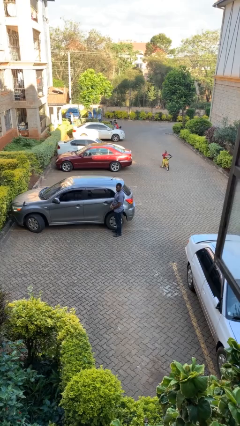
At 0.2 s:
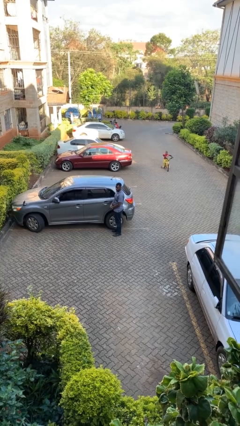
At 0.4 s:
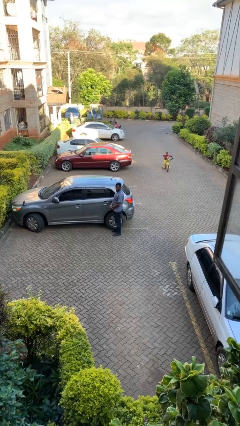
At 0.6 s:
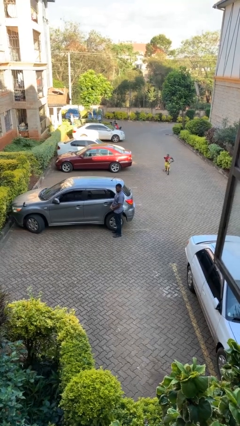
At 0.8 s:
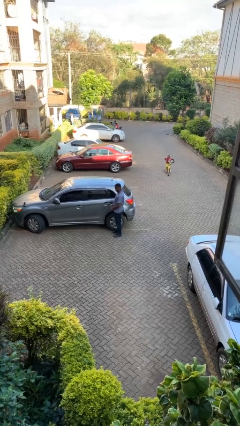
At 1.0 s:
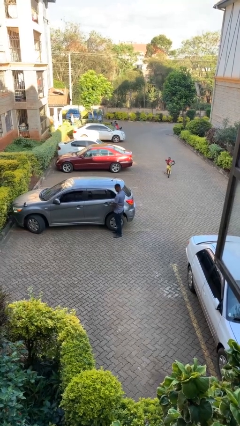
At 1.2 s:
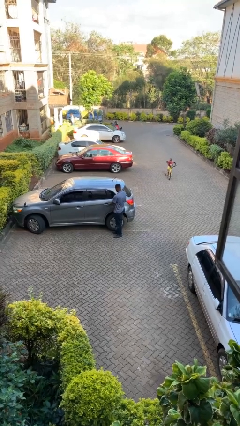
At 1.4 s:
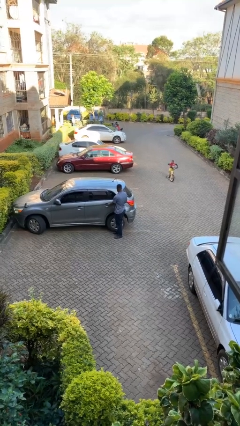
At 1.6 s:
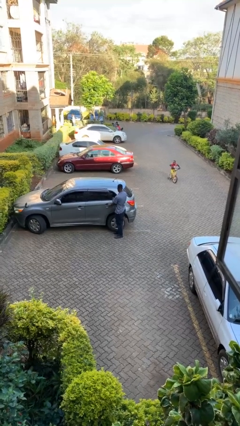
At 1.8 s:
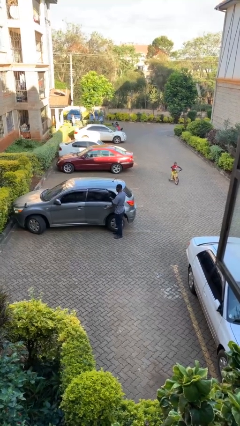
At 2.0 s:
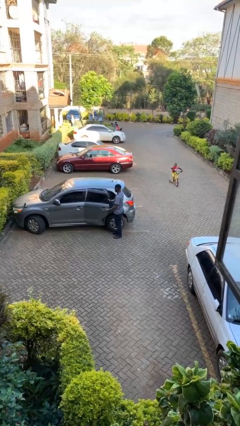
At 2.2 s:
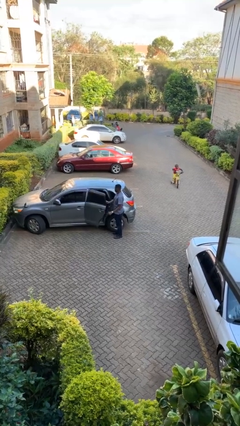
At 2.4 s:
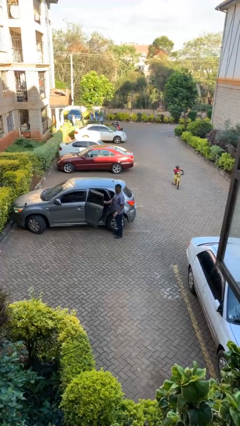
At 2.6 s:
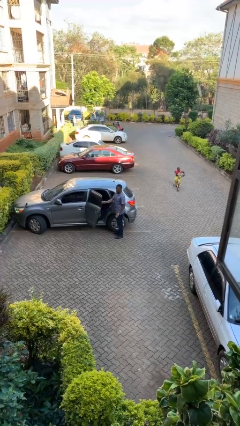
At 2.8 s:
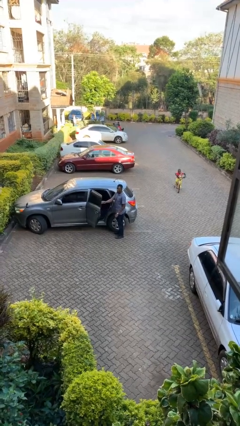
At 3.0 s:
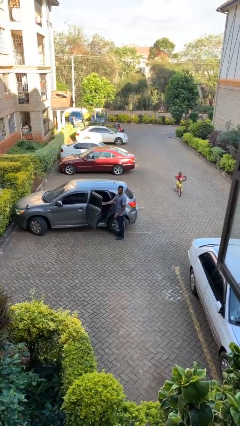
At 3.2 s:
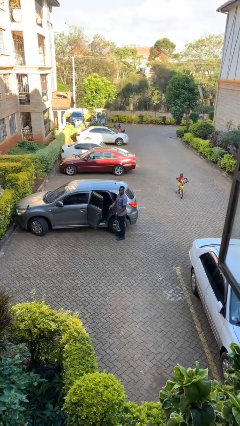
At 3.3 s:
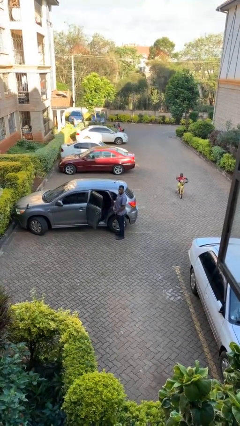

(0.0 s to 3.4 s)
person opens car door

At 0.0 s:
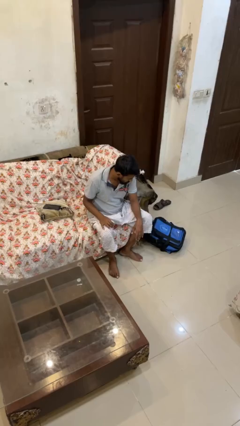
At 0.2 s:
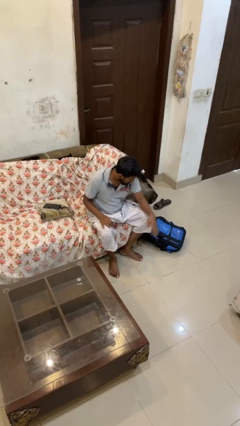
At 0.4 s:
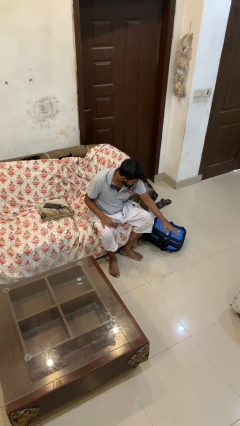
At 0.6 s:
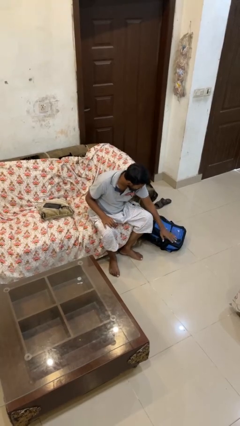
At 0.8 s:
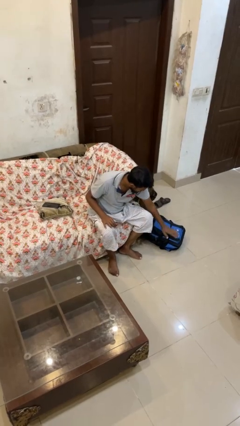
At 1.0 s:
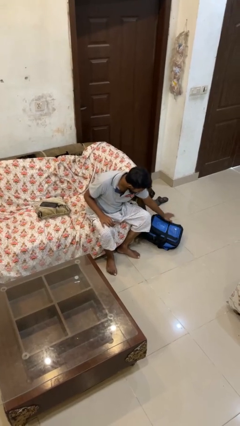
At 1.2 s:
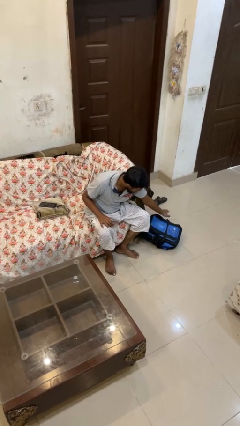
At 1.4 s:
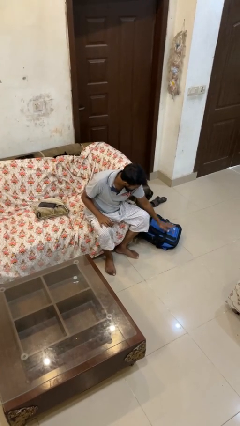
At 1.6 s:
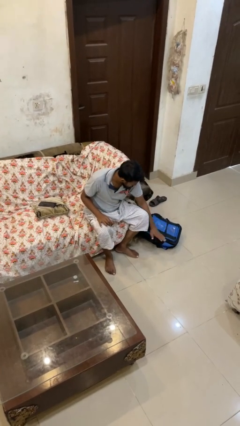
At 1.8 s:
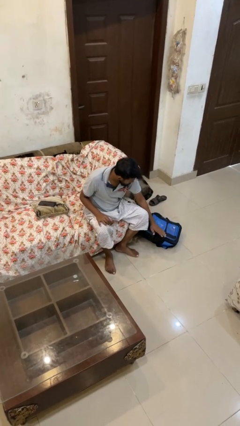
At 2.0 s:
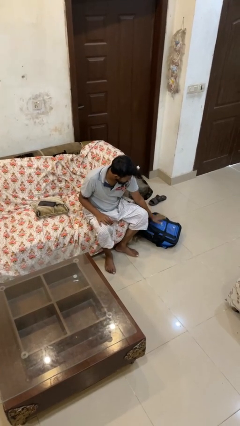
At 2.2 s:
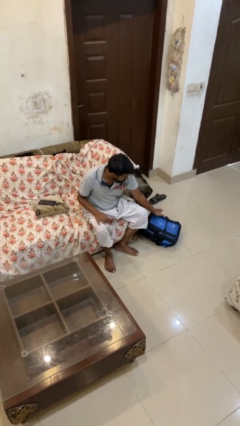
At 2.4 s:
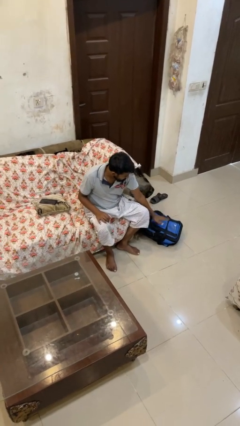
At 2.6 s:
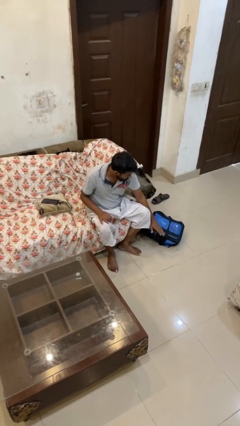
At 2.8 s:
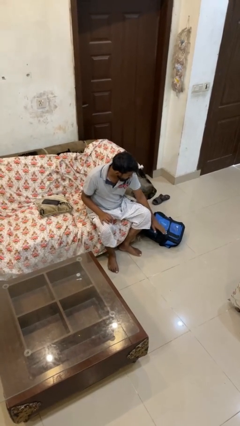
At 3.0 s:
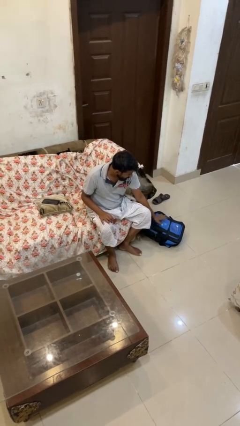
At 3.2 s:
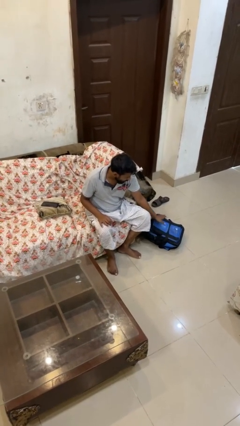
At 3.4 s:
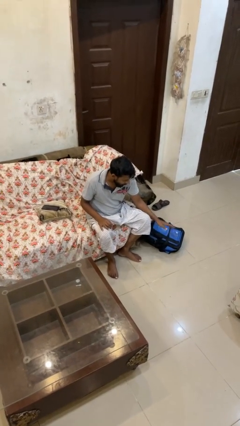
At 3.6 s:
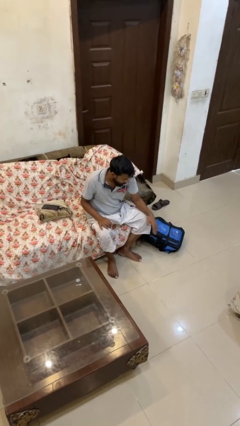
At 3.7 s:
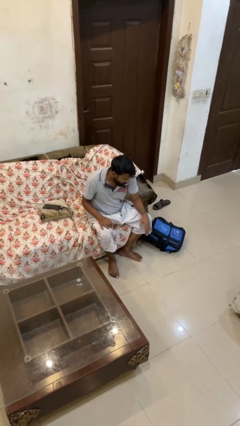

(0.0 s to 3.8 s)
person waves hand over object

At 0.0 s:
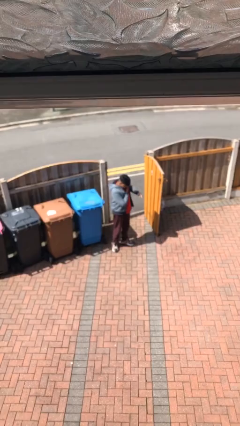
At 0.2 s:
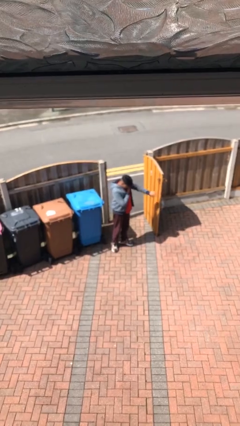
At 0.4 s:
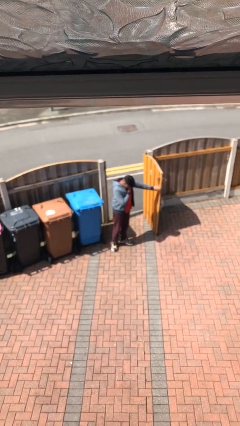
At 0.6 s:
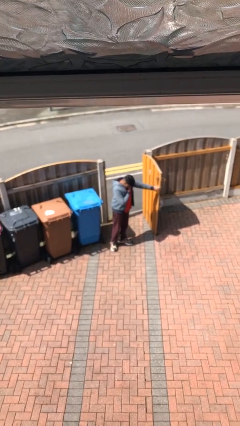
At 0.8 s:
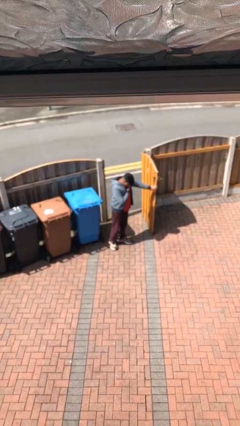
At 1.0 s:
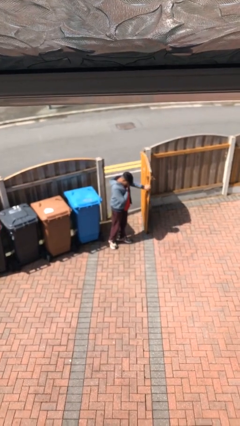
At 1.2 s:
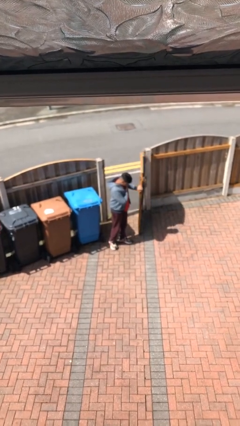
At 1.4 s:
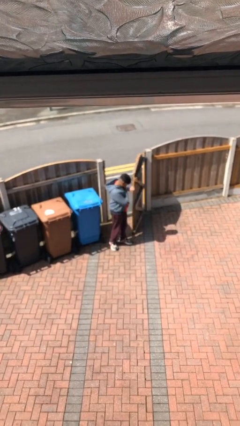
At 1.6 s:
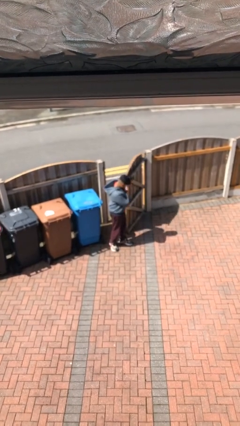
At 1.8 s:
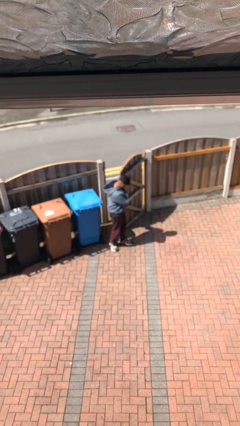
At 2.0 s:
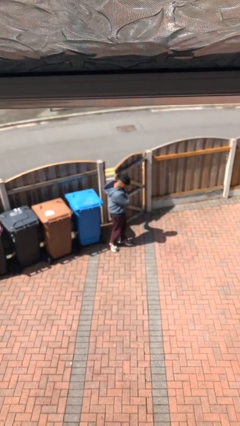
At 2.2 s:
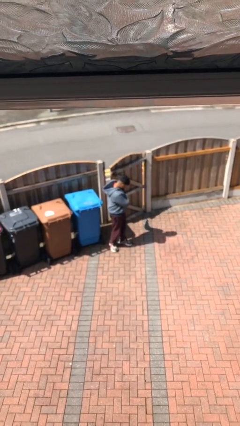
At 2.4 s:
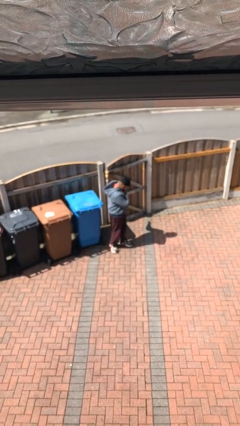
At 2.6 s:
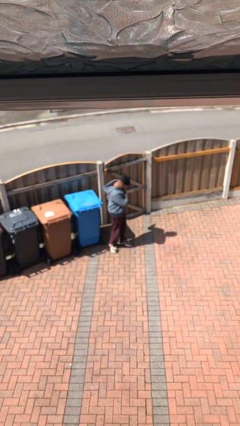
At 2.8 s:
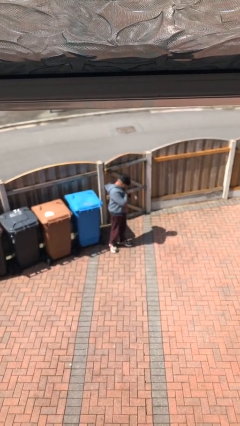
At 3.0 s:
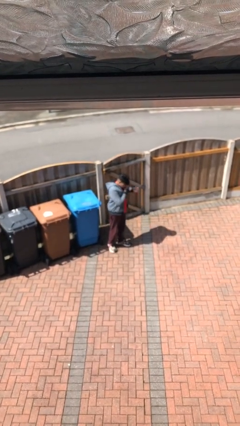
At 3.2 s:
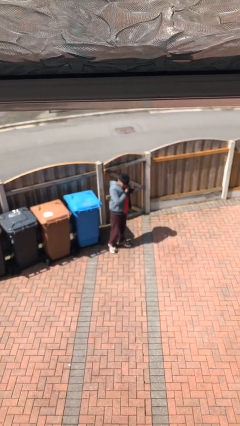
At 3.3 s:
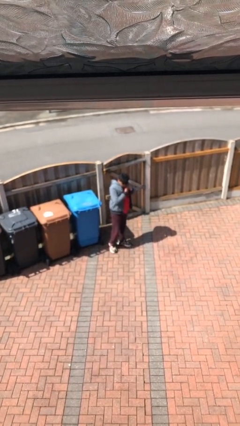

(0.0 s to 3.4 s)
person closes facility door

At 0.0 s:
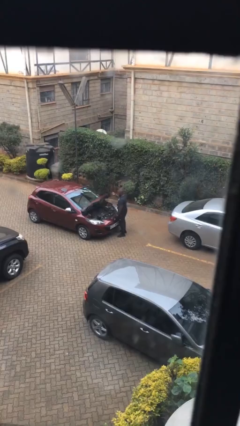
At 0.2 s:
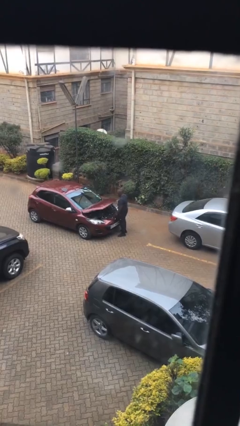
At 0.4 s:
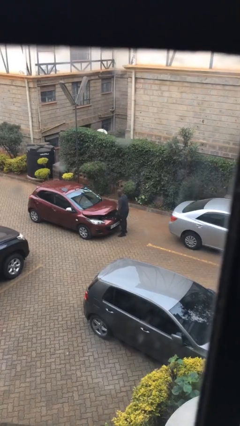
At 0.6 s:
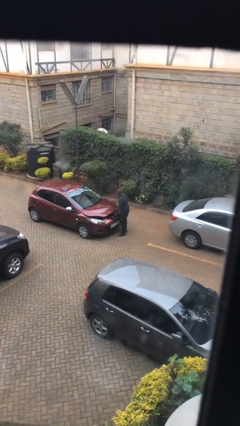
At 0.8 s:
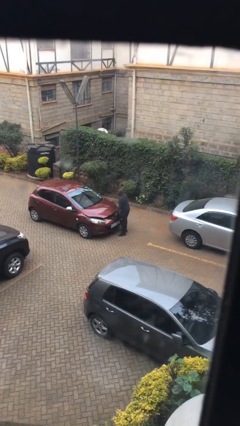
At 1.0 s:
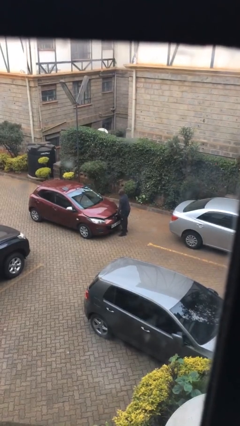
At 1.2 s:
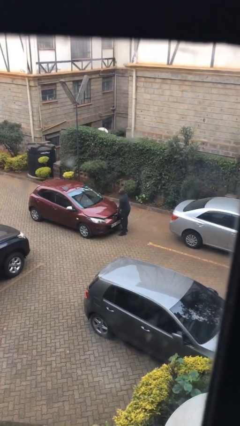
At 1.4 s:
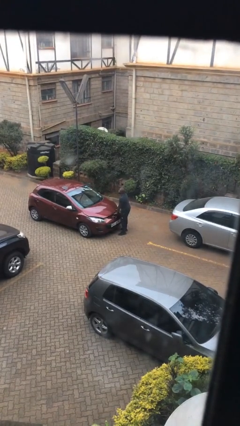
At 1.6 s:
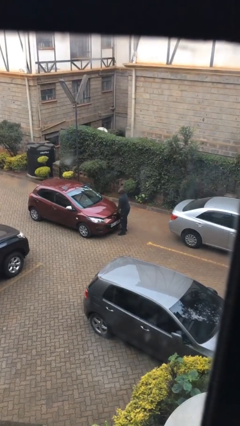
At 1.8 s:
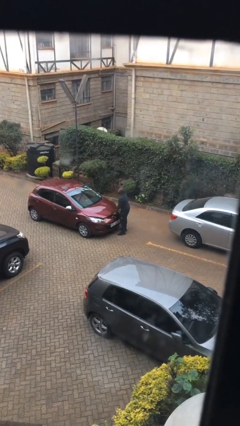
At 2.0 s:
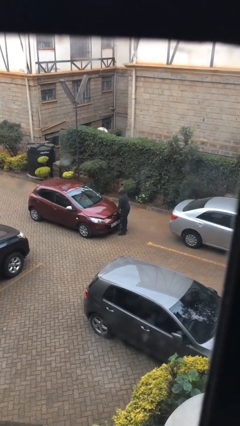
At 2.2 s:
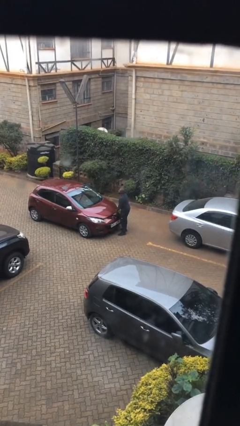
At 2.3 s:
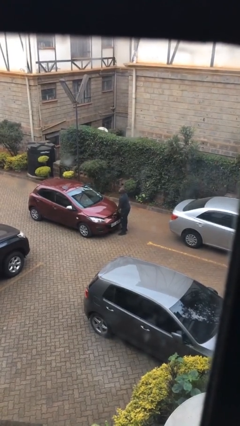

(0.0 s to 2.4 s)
person closes car hood

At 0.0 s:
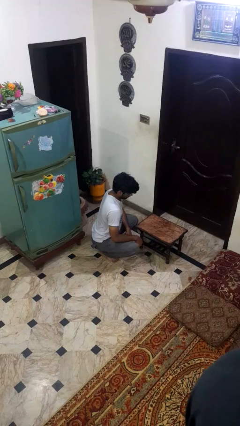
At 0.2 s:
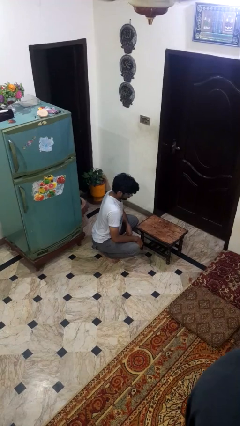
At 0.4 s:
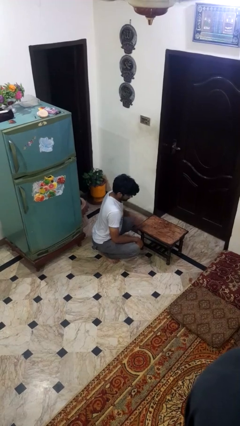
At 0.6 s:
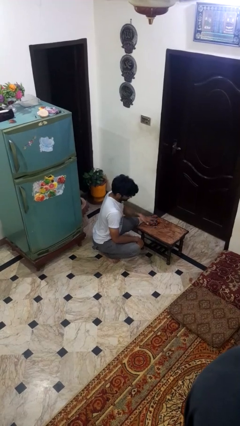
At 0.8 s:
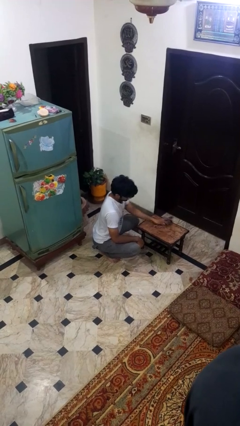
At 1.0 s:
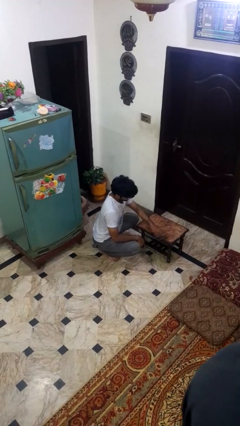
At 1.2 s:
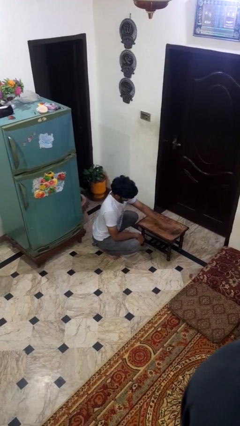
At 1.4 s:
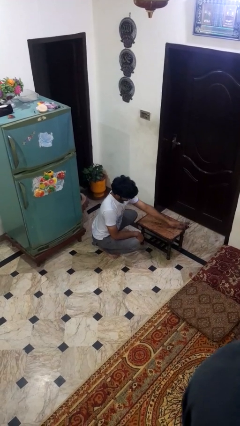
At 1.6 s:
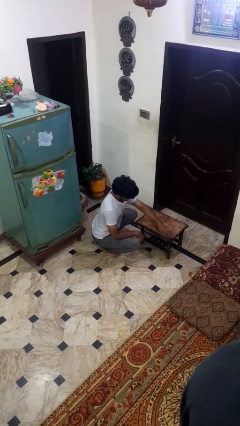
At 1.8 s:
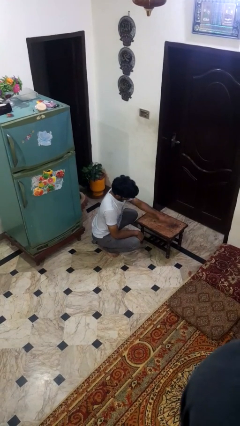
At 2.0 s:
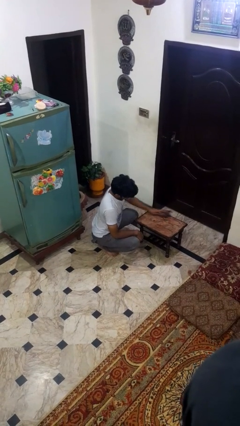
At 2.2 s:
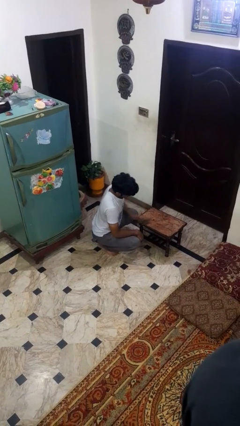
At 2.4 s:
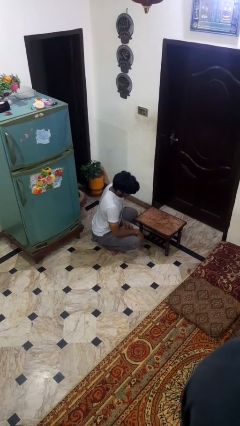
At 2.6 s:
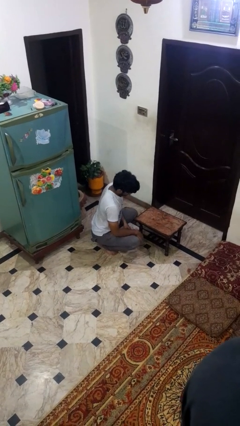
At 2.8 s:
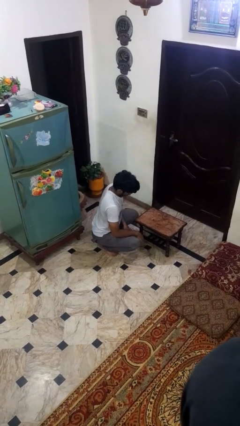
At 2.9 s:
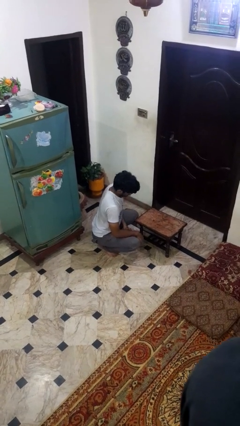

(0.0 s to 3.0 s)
person cleans table with rag

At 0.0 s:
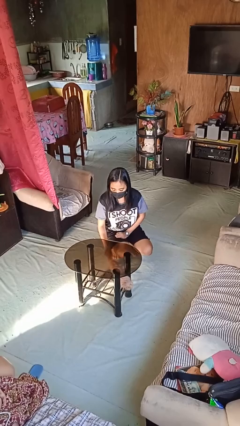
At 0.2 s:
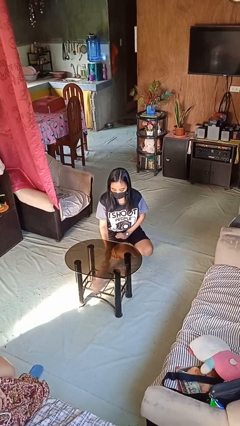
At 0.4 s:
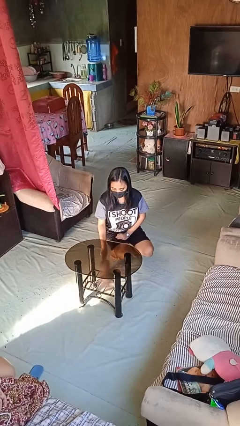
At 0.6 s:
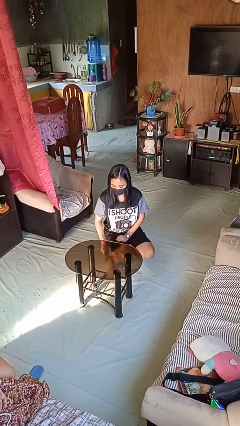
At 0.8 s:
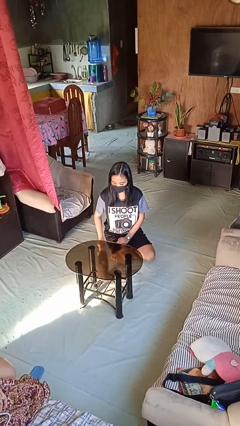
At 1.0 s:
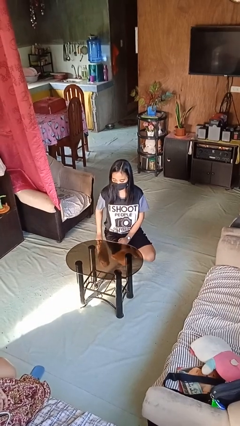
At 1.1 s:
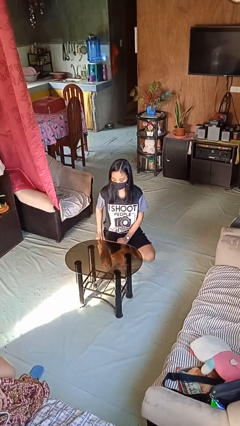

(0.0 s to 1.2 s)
person dusts furniture
